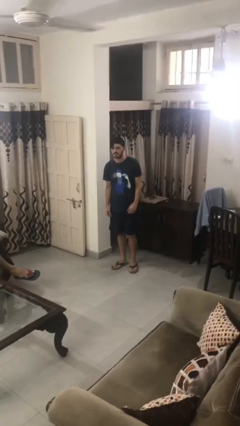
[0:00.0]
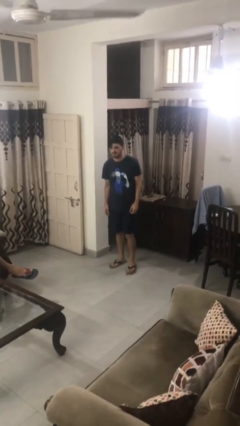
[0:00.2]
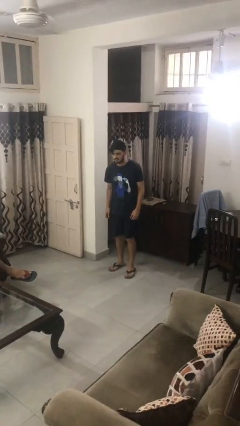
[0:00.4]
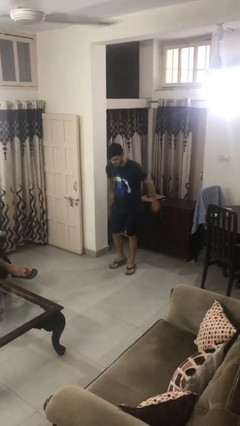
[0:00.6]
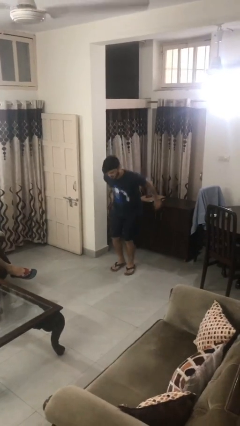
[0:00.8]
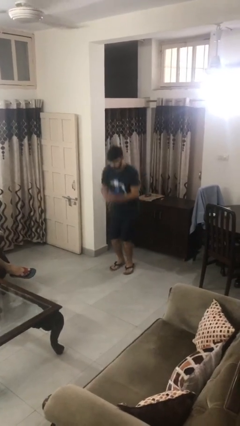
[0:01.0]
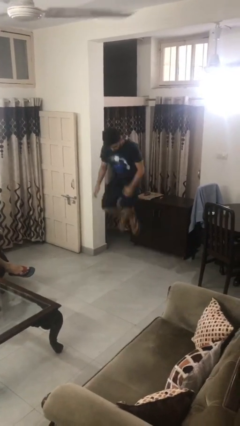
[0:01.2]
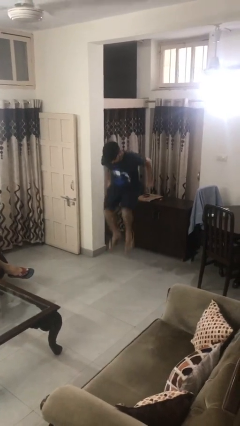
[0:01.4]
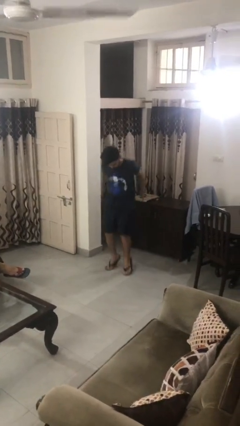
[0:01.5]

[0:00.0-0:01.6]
person jumps

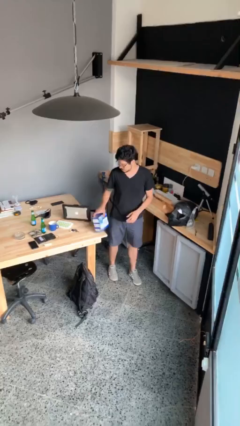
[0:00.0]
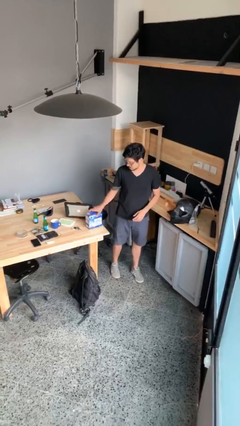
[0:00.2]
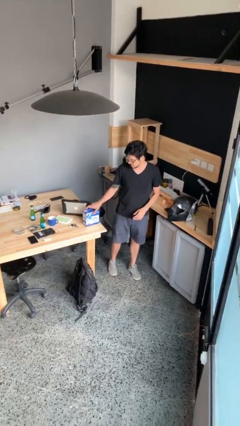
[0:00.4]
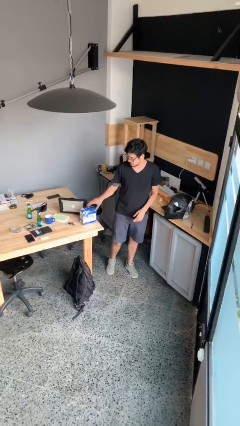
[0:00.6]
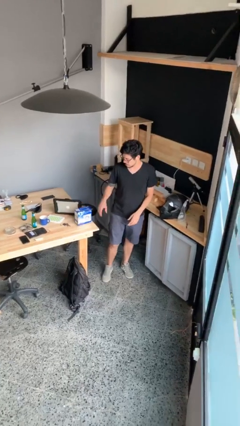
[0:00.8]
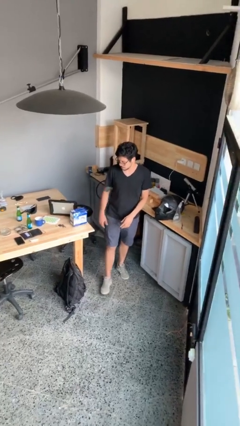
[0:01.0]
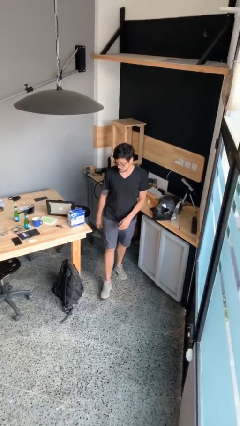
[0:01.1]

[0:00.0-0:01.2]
person puts down object on table

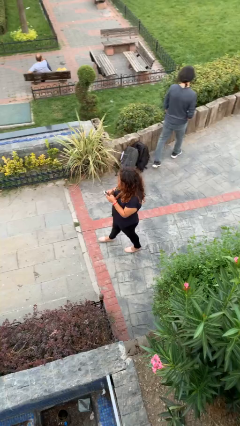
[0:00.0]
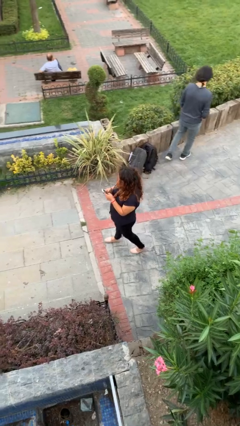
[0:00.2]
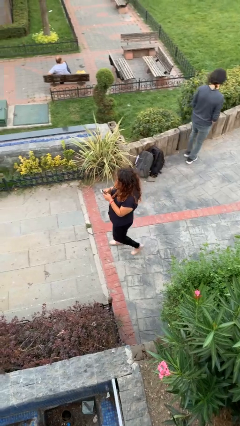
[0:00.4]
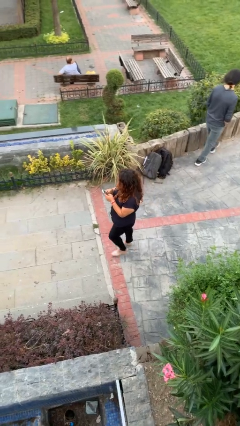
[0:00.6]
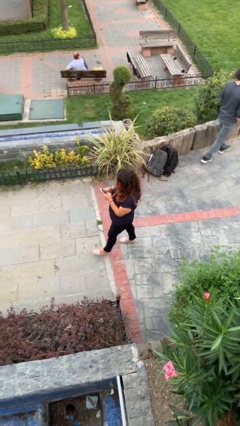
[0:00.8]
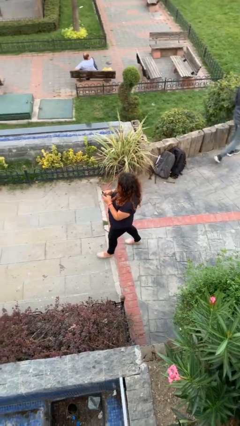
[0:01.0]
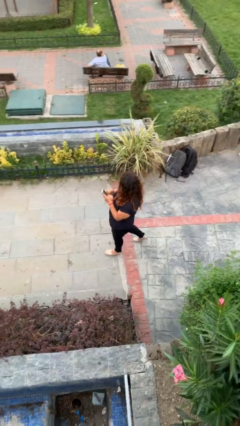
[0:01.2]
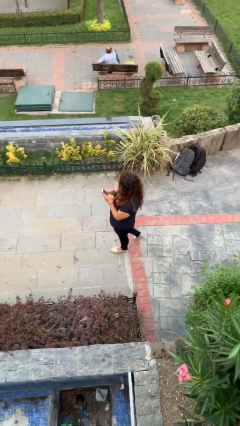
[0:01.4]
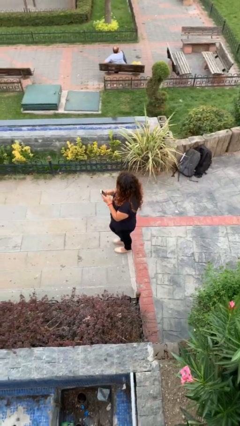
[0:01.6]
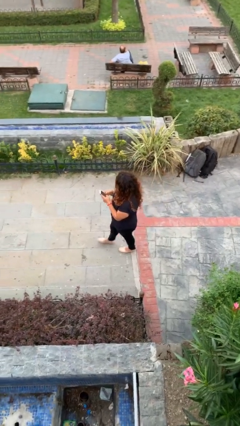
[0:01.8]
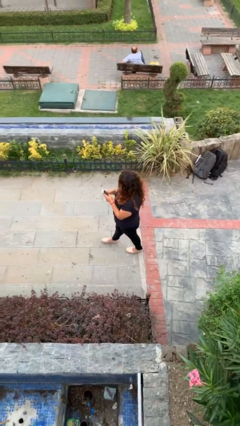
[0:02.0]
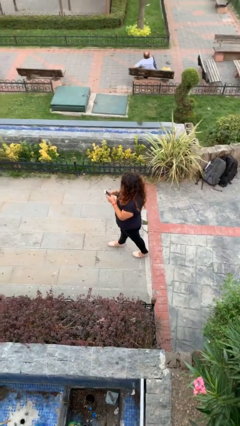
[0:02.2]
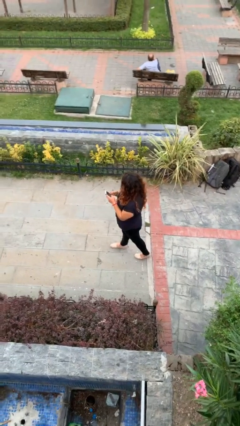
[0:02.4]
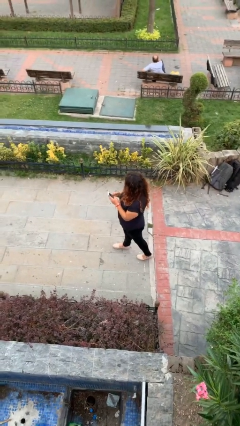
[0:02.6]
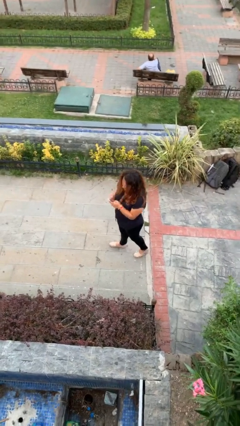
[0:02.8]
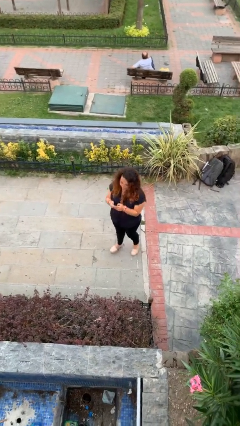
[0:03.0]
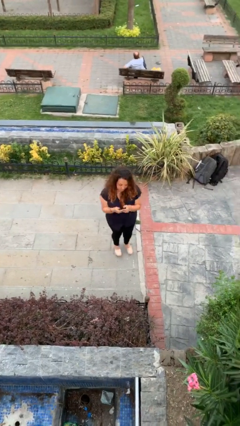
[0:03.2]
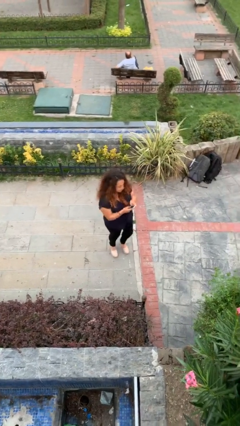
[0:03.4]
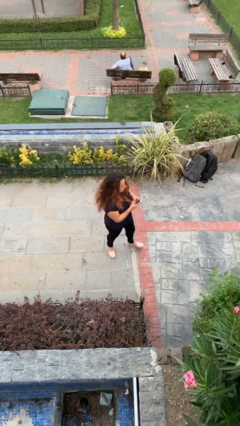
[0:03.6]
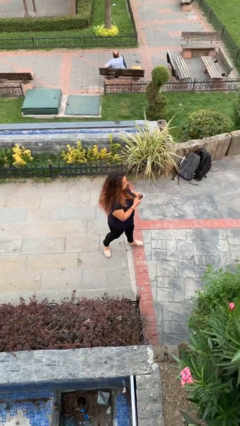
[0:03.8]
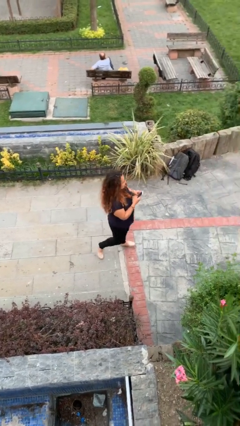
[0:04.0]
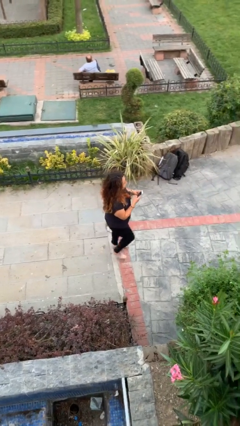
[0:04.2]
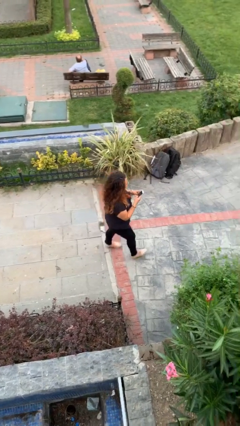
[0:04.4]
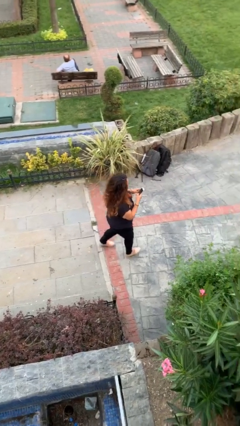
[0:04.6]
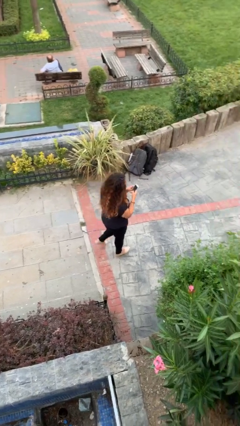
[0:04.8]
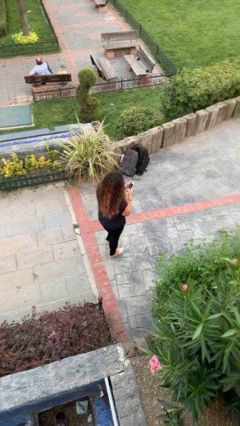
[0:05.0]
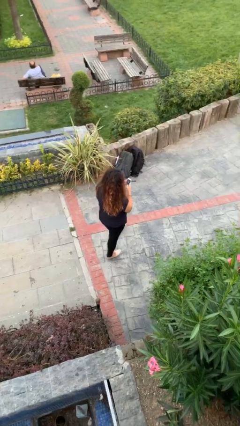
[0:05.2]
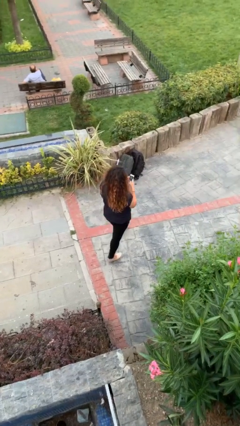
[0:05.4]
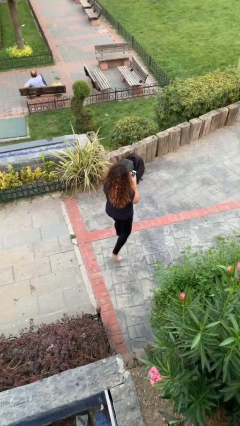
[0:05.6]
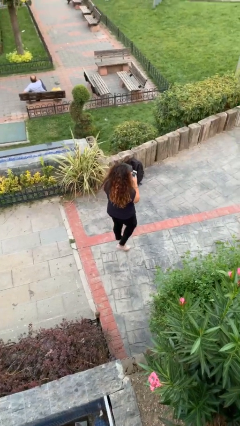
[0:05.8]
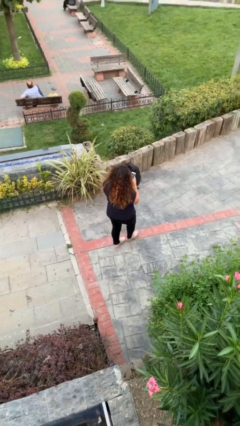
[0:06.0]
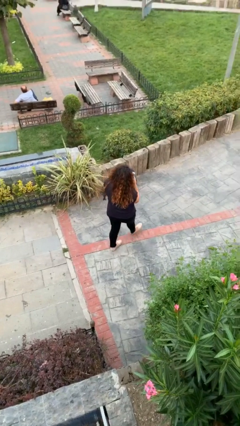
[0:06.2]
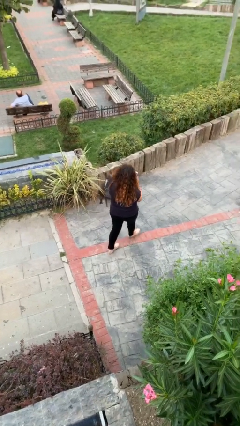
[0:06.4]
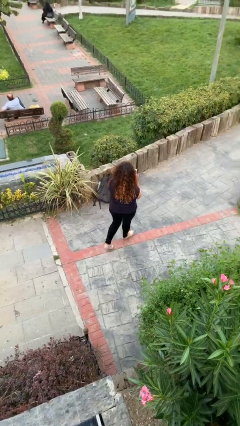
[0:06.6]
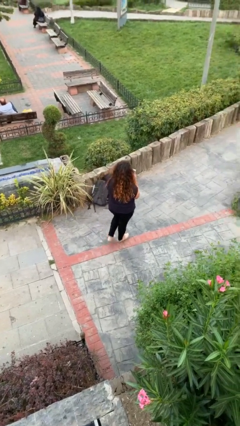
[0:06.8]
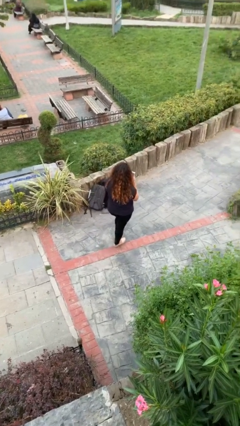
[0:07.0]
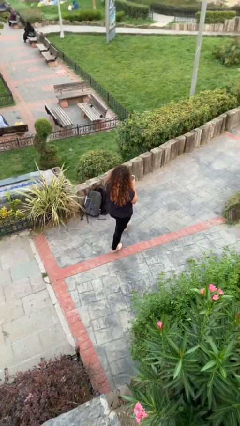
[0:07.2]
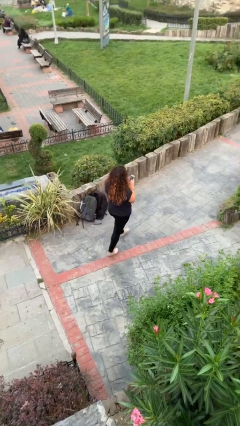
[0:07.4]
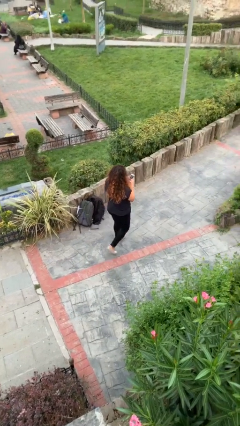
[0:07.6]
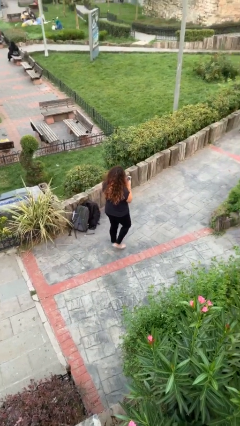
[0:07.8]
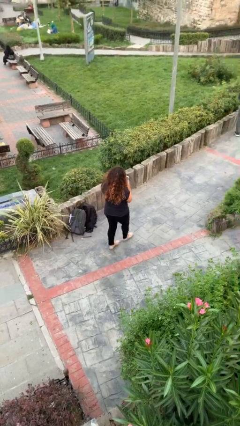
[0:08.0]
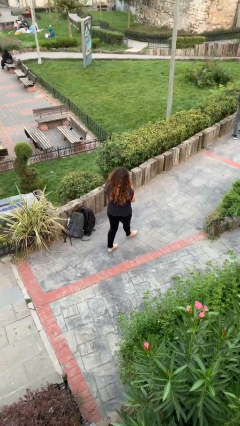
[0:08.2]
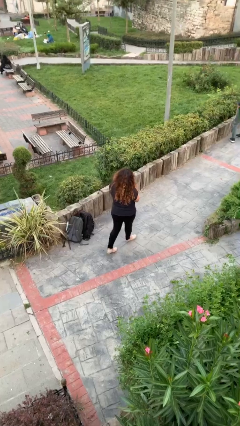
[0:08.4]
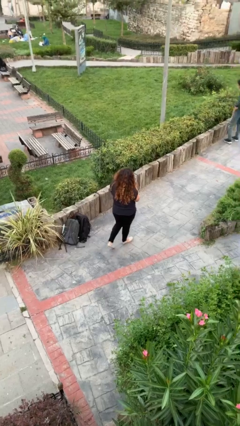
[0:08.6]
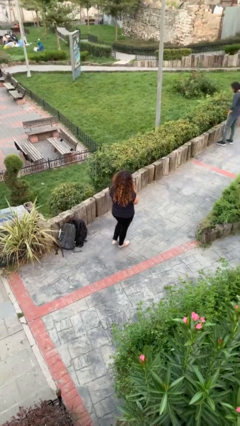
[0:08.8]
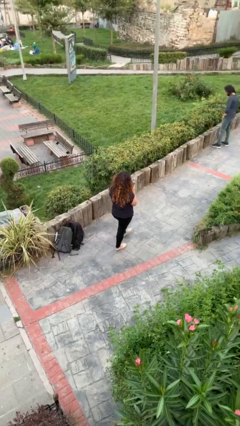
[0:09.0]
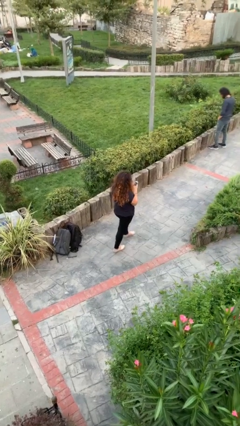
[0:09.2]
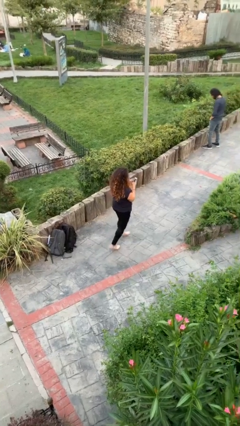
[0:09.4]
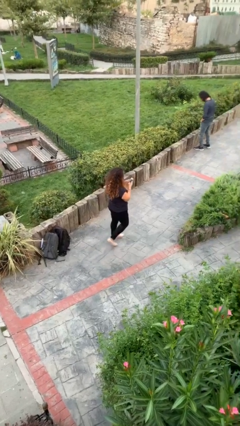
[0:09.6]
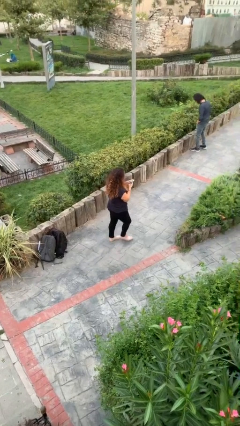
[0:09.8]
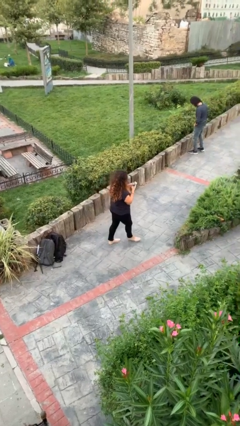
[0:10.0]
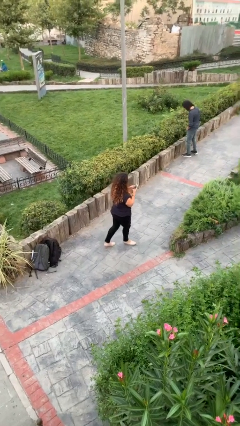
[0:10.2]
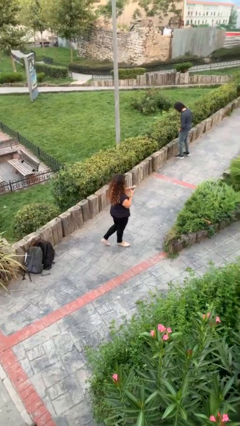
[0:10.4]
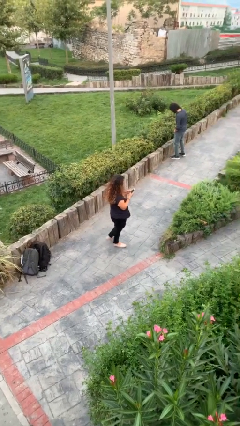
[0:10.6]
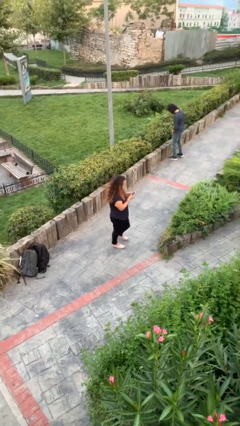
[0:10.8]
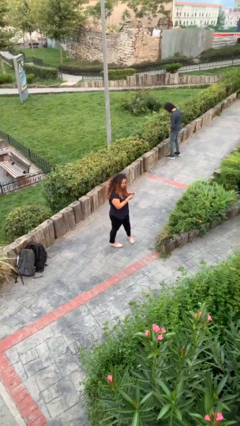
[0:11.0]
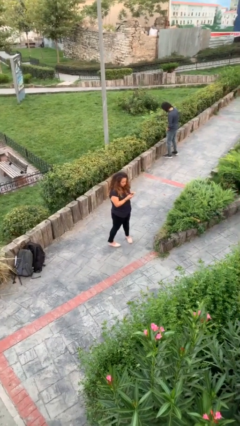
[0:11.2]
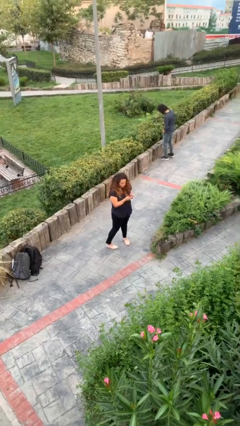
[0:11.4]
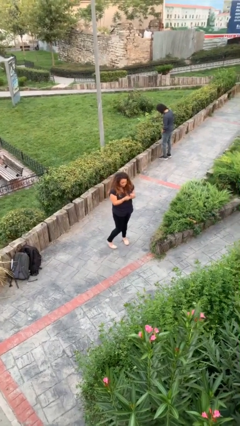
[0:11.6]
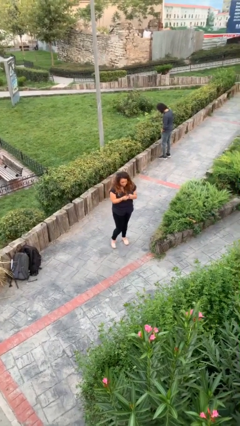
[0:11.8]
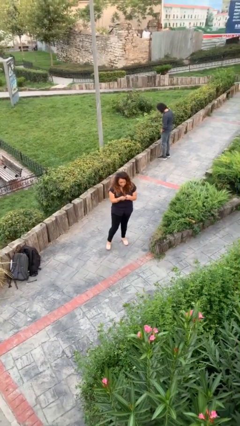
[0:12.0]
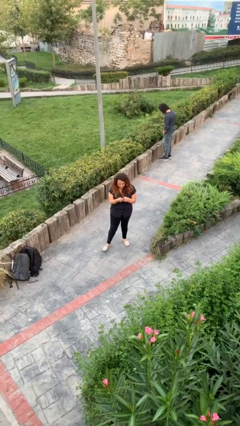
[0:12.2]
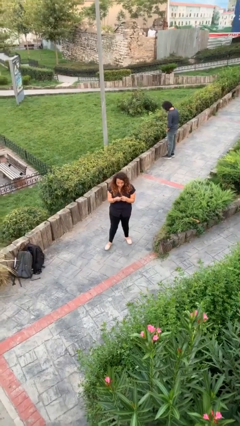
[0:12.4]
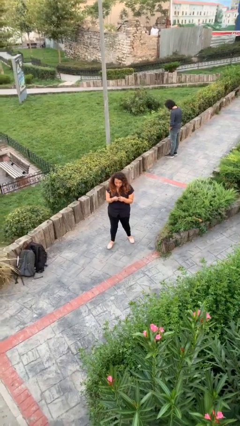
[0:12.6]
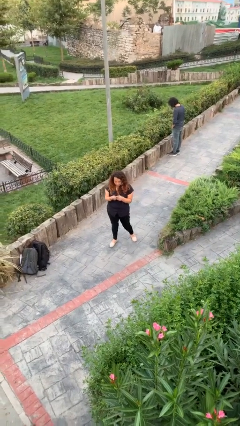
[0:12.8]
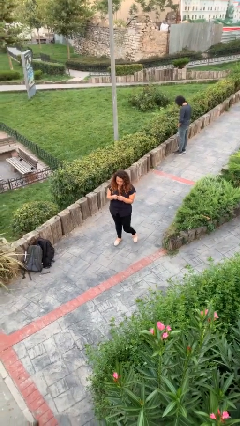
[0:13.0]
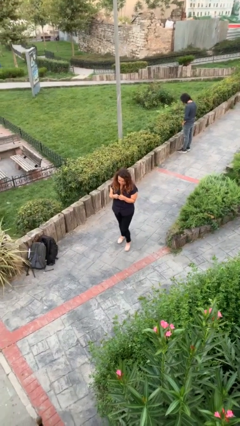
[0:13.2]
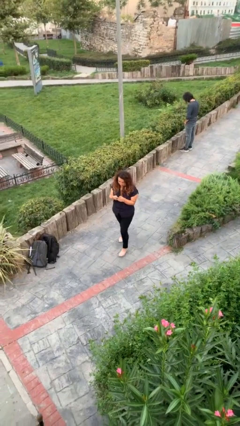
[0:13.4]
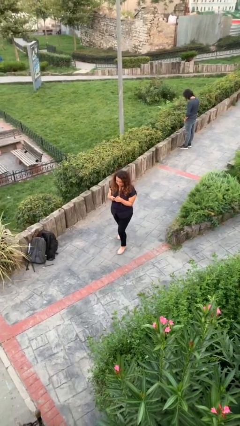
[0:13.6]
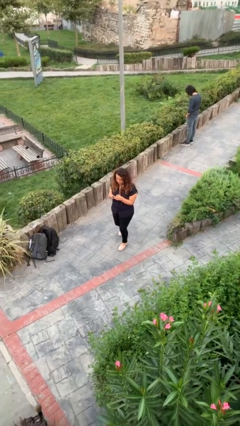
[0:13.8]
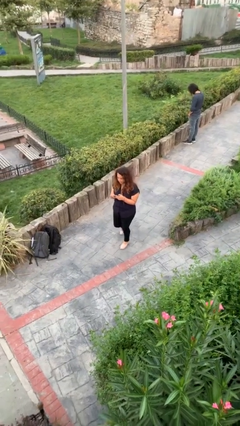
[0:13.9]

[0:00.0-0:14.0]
person texts on phone

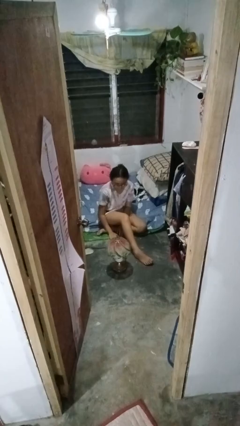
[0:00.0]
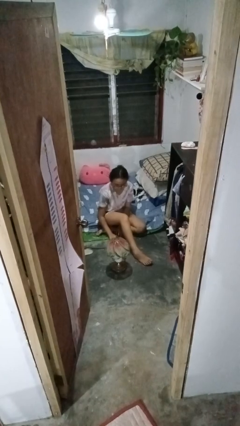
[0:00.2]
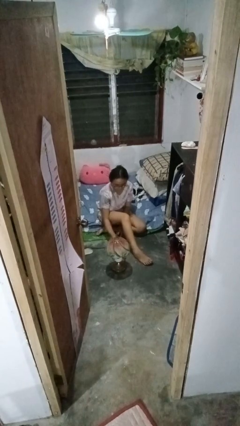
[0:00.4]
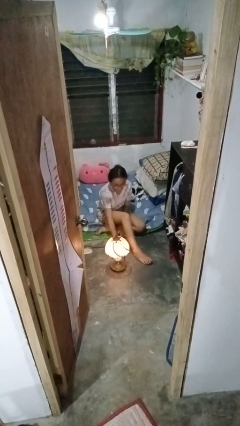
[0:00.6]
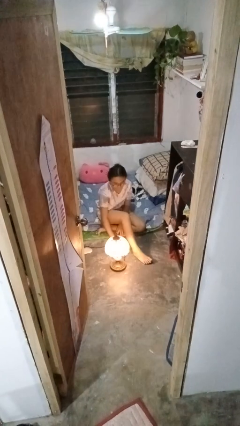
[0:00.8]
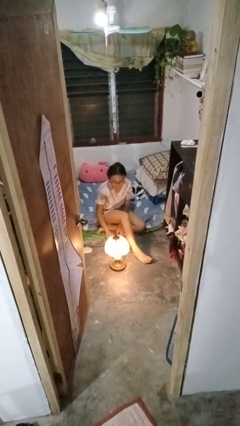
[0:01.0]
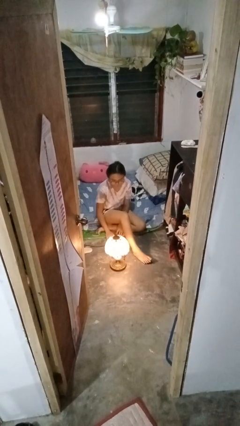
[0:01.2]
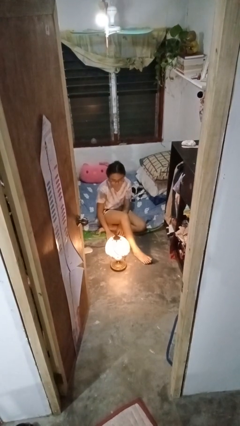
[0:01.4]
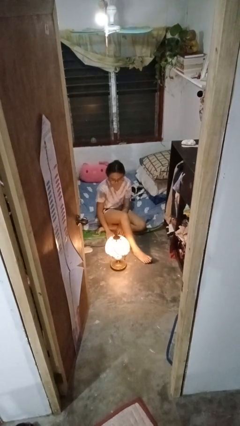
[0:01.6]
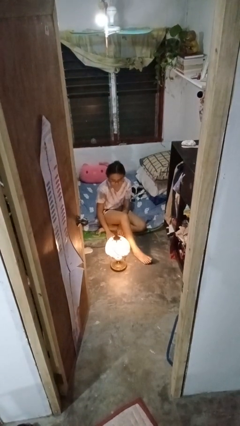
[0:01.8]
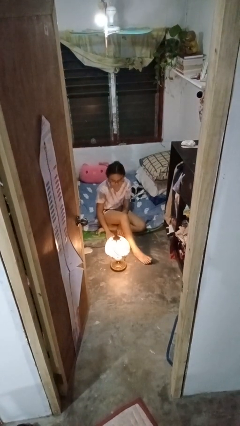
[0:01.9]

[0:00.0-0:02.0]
person turns on lamp
